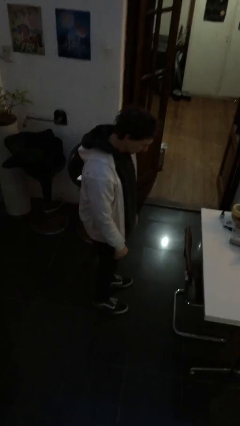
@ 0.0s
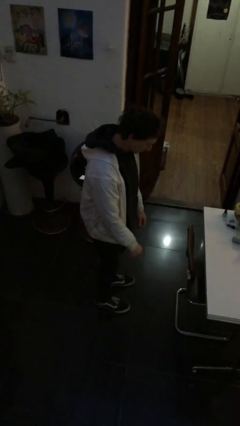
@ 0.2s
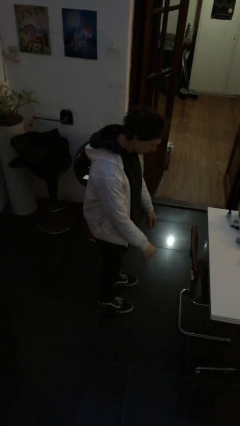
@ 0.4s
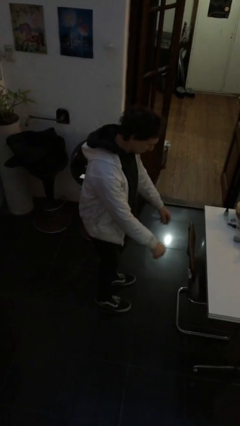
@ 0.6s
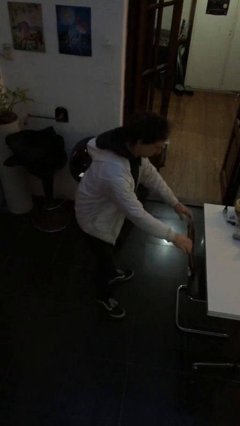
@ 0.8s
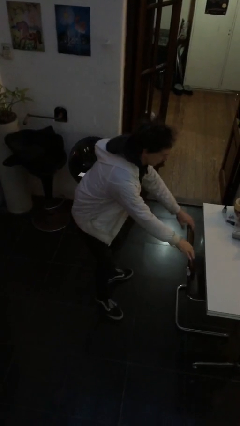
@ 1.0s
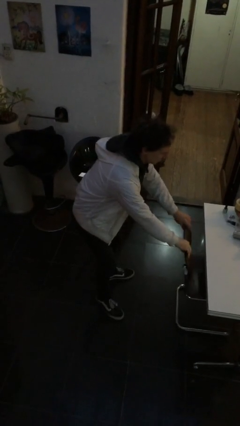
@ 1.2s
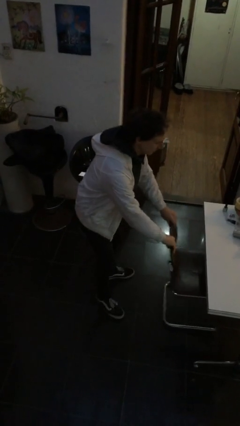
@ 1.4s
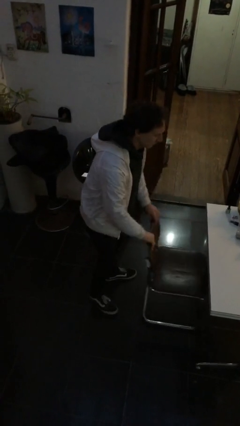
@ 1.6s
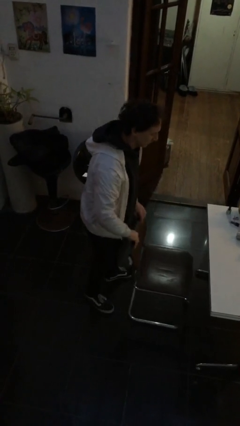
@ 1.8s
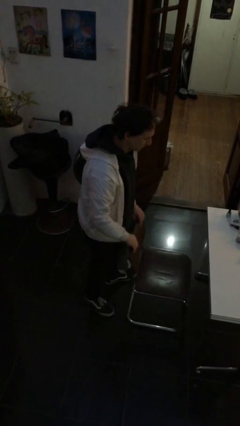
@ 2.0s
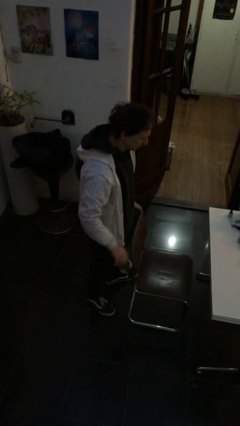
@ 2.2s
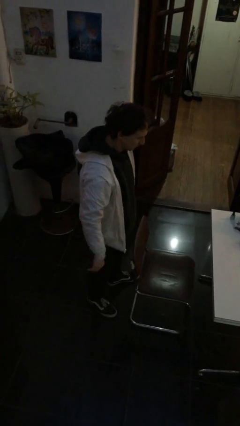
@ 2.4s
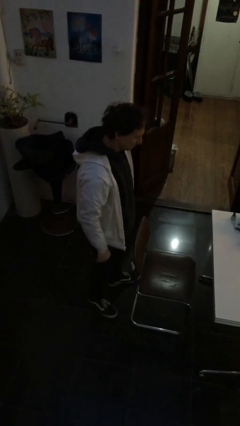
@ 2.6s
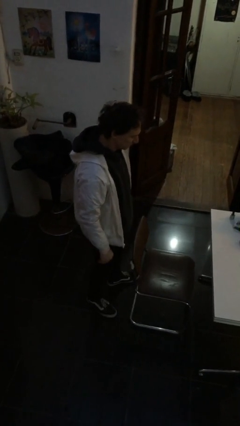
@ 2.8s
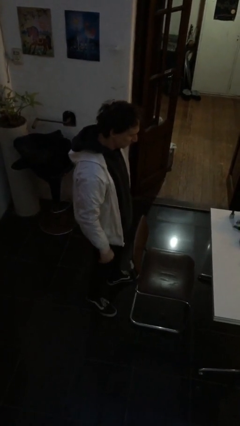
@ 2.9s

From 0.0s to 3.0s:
person pulls out chair

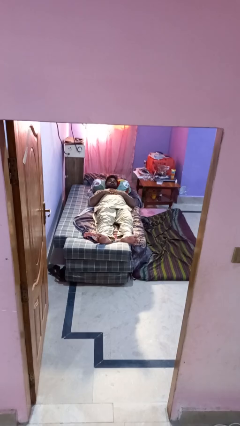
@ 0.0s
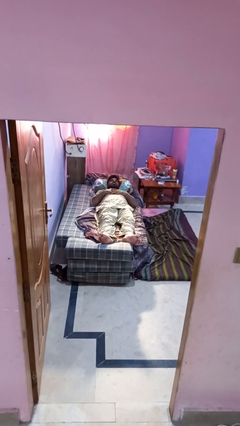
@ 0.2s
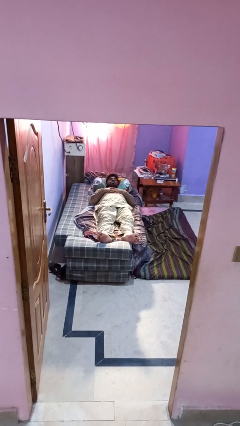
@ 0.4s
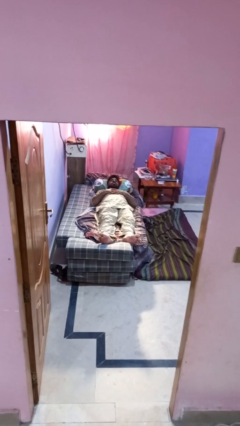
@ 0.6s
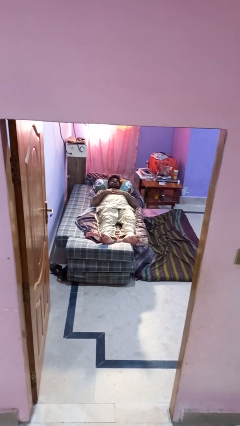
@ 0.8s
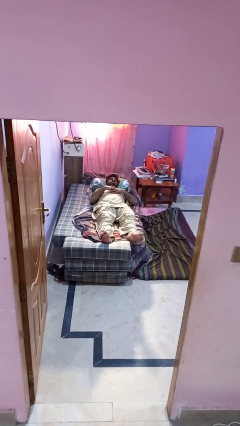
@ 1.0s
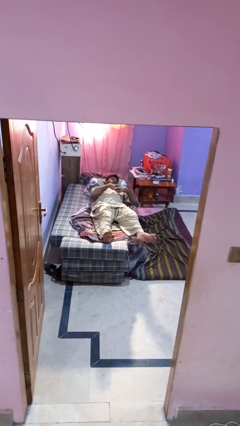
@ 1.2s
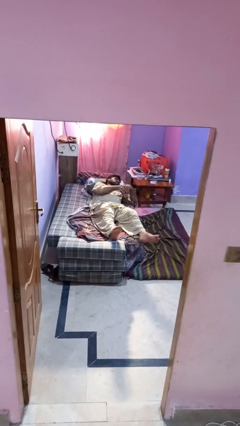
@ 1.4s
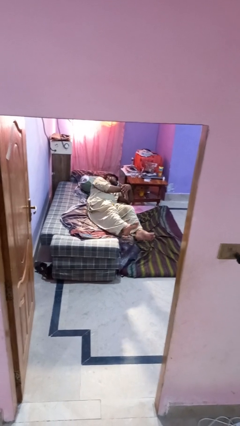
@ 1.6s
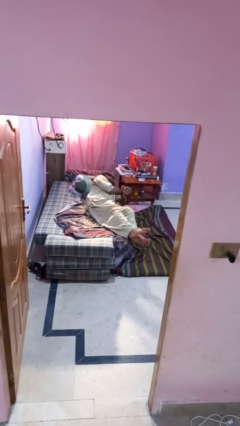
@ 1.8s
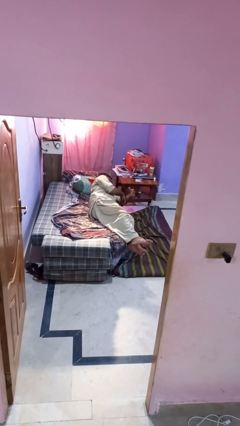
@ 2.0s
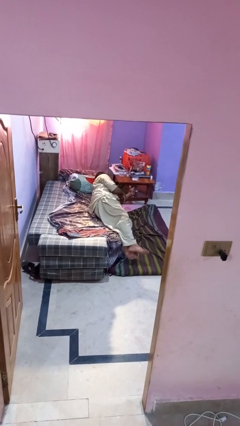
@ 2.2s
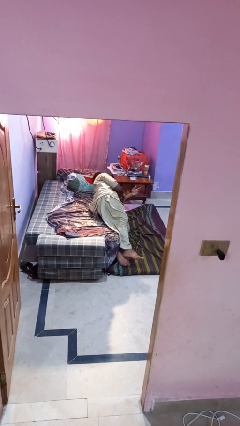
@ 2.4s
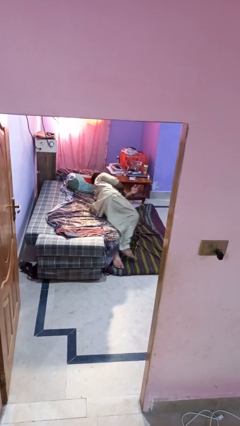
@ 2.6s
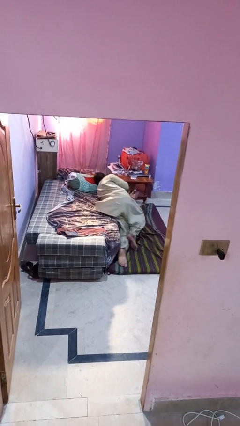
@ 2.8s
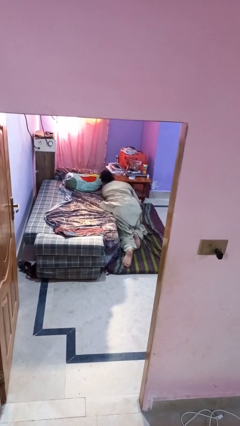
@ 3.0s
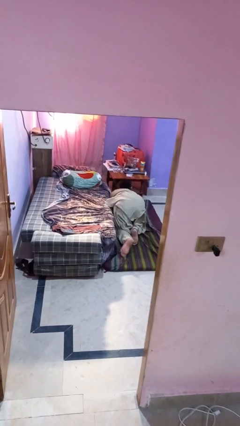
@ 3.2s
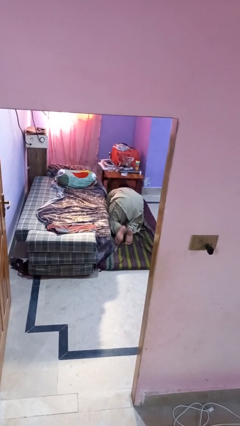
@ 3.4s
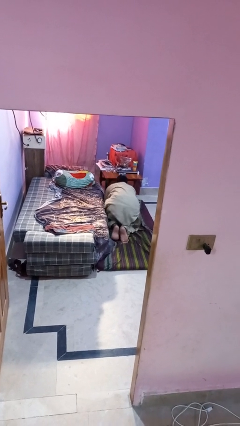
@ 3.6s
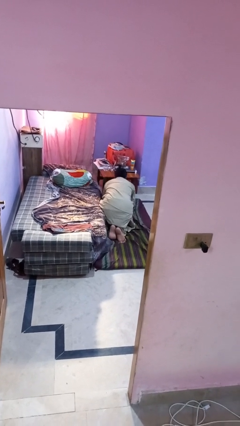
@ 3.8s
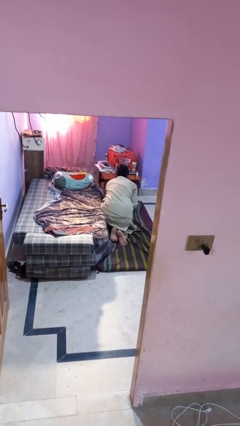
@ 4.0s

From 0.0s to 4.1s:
person falls from bed

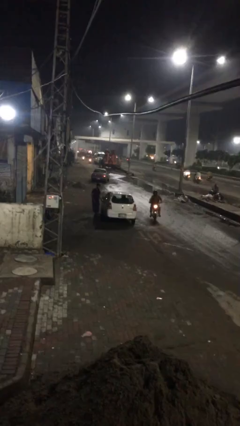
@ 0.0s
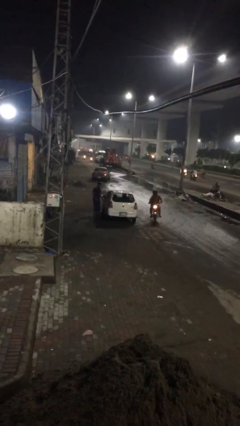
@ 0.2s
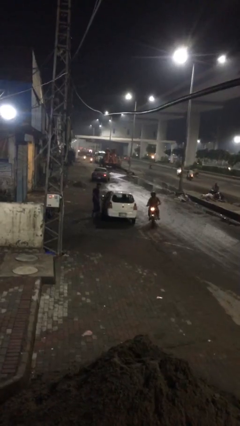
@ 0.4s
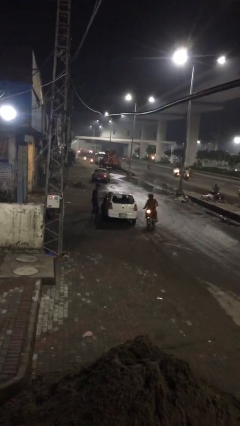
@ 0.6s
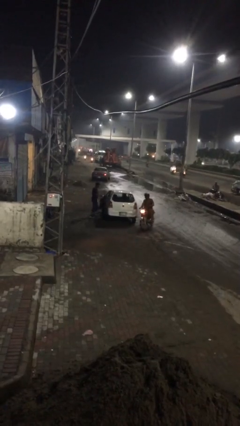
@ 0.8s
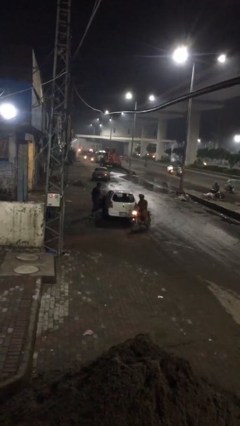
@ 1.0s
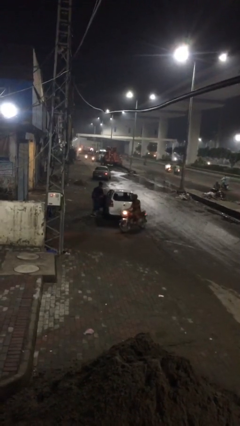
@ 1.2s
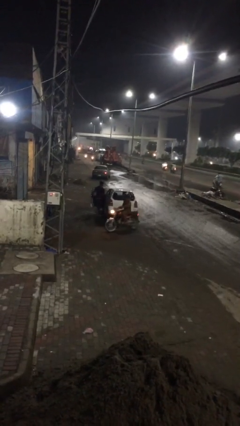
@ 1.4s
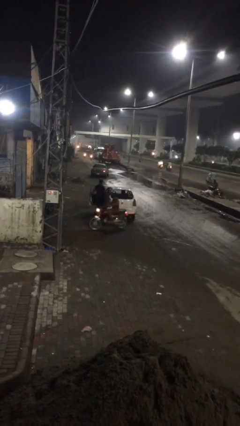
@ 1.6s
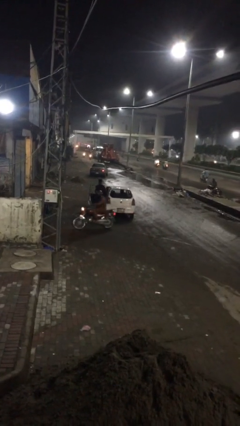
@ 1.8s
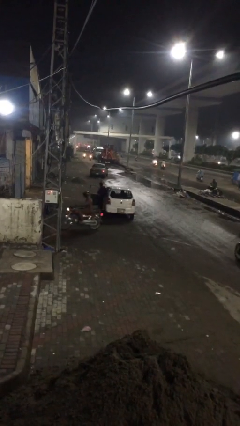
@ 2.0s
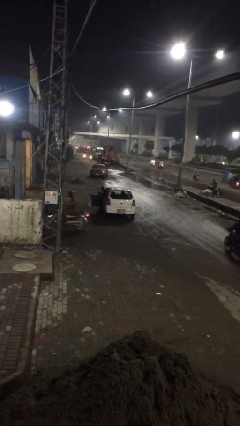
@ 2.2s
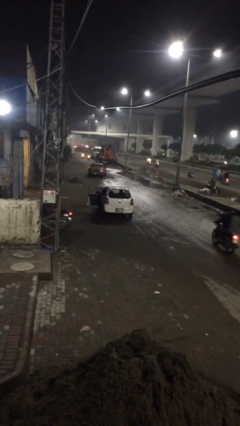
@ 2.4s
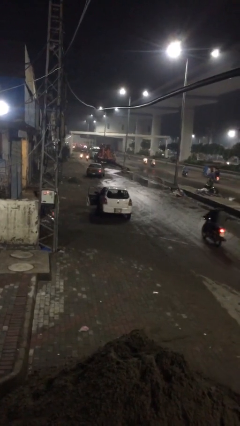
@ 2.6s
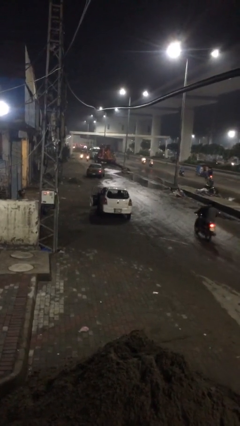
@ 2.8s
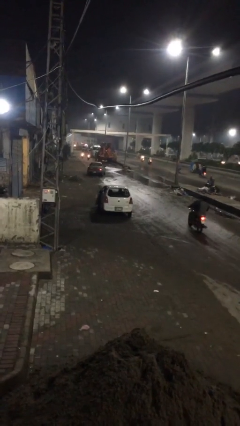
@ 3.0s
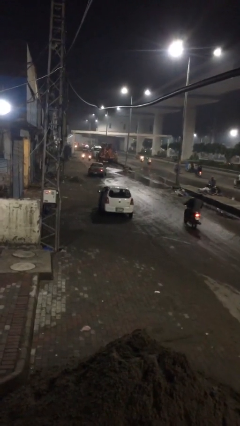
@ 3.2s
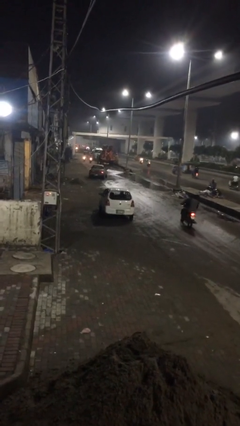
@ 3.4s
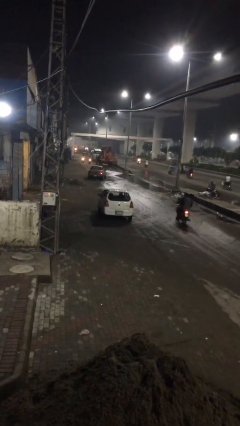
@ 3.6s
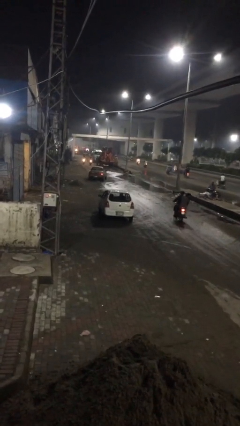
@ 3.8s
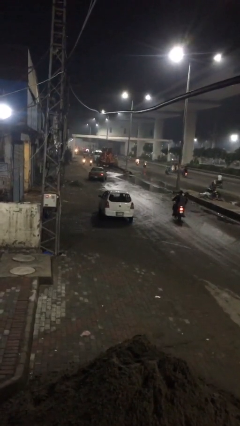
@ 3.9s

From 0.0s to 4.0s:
car picks up person

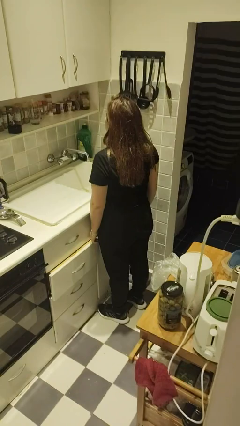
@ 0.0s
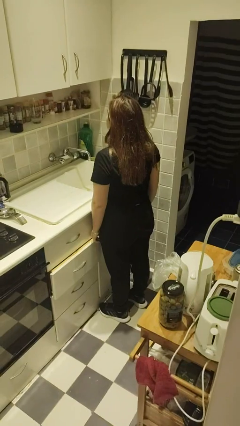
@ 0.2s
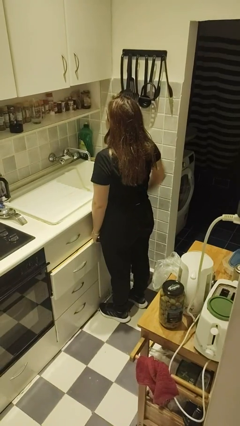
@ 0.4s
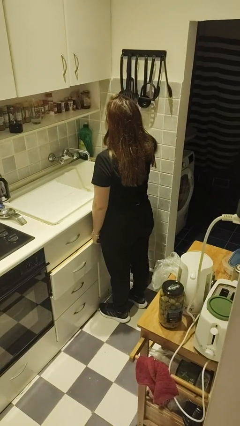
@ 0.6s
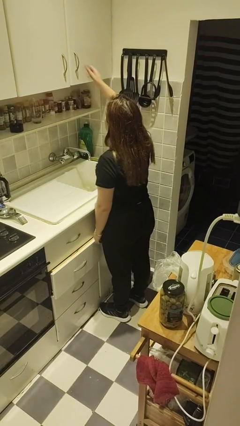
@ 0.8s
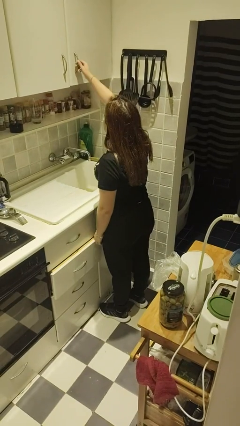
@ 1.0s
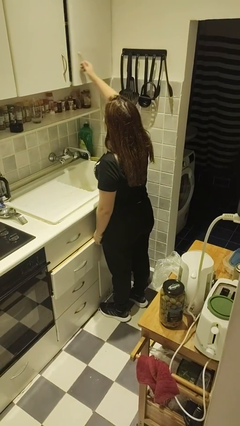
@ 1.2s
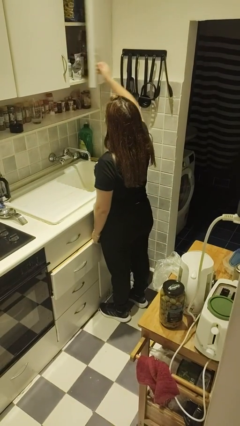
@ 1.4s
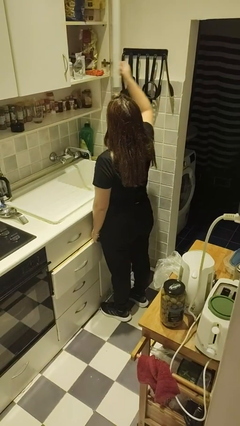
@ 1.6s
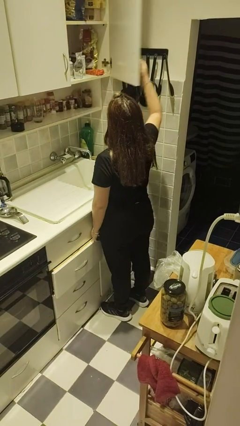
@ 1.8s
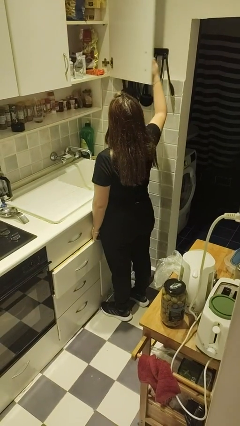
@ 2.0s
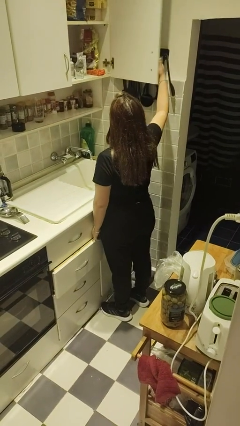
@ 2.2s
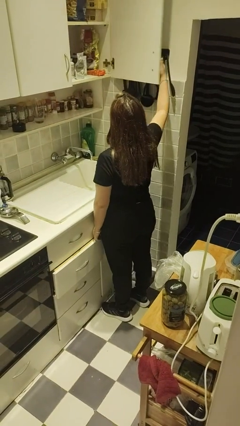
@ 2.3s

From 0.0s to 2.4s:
person opens cabinet

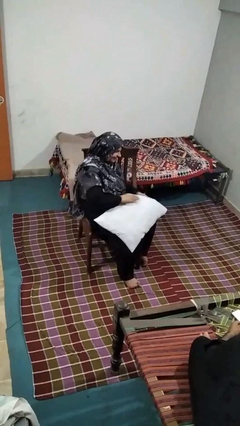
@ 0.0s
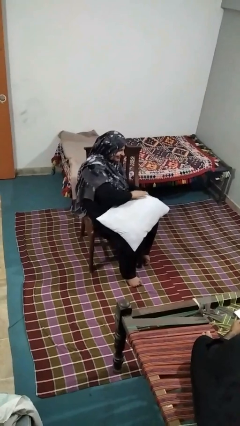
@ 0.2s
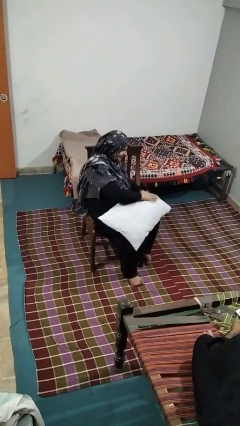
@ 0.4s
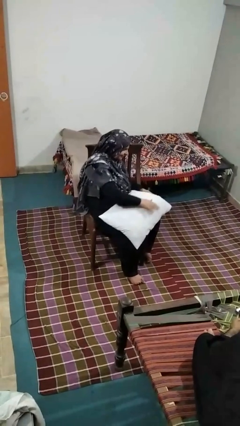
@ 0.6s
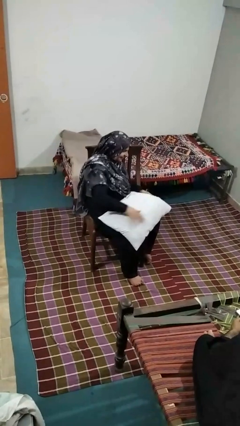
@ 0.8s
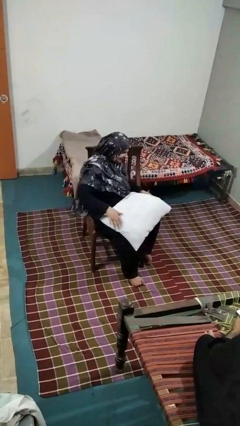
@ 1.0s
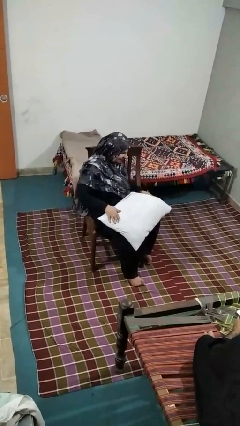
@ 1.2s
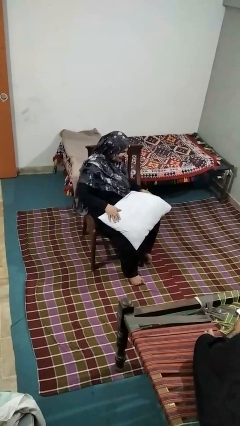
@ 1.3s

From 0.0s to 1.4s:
person waves hand over object

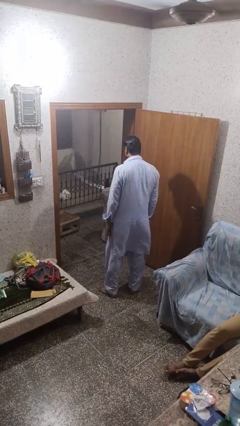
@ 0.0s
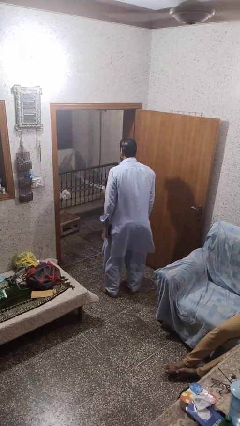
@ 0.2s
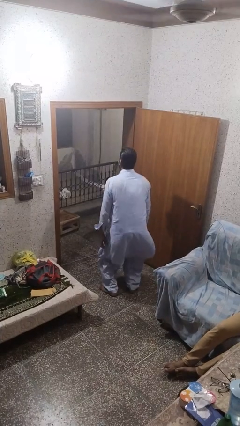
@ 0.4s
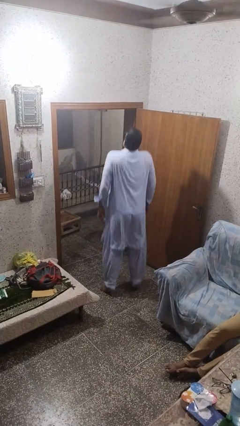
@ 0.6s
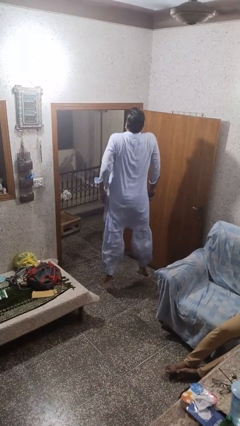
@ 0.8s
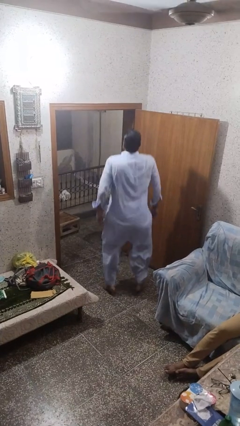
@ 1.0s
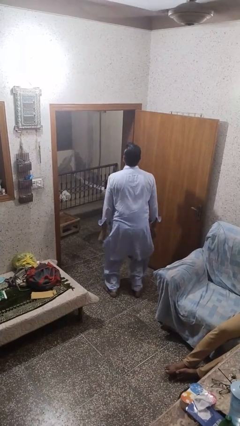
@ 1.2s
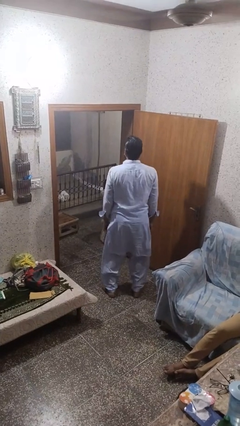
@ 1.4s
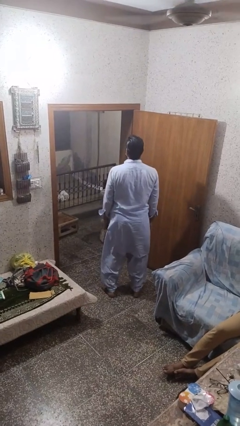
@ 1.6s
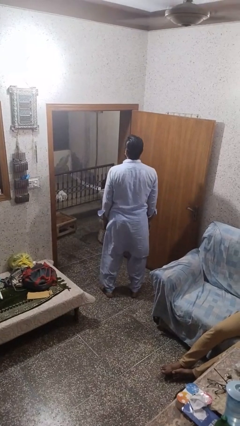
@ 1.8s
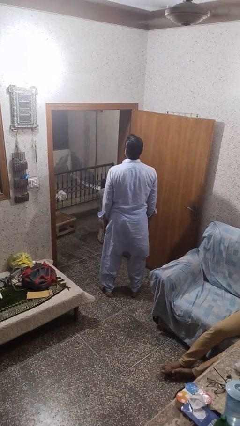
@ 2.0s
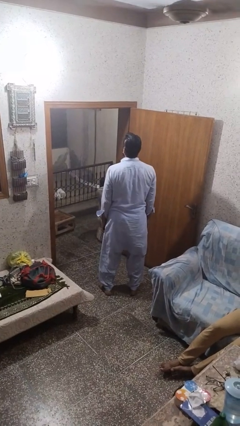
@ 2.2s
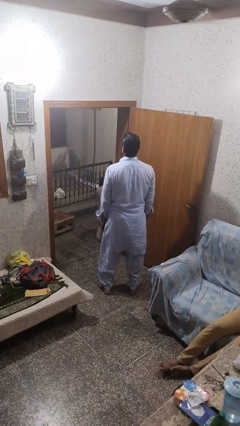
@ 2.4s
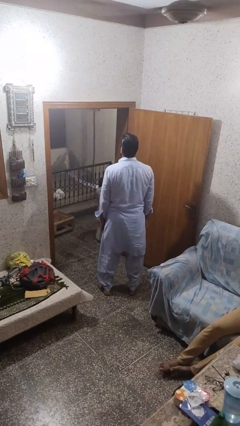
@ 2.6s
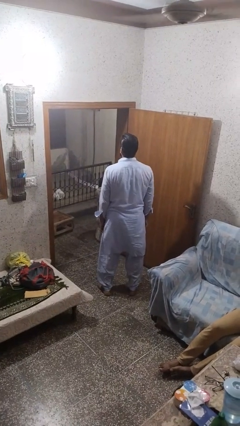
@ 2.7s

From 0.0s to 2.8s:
person jumps
